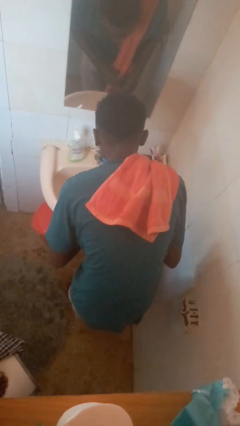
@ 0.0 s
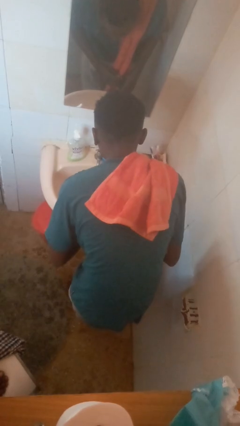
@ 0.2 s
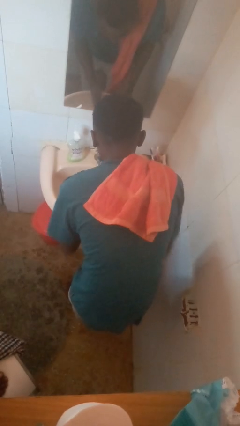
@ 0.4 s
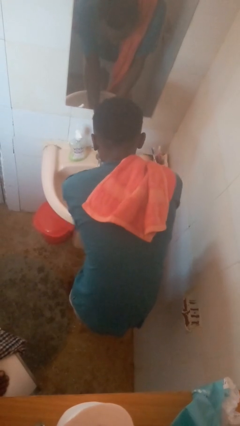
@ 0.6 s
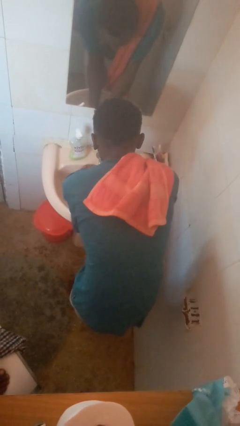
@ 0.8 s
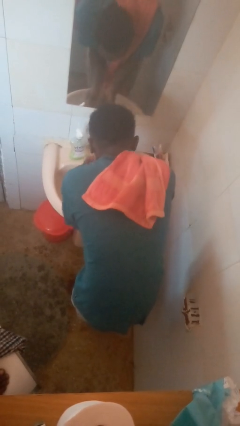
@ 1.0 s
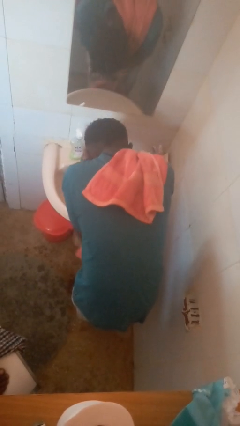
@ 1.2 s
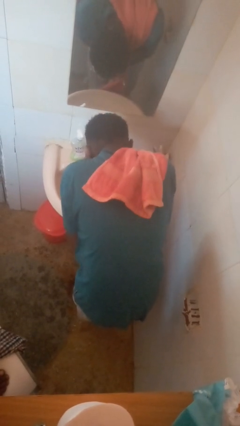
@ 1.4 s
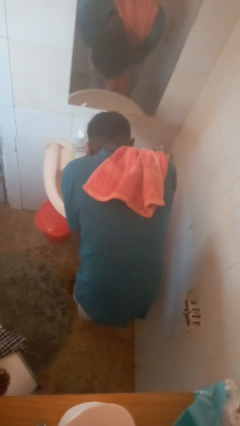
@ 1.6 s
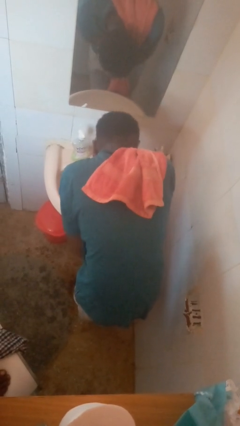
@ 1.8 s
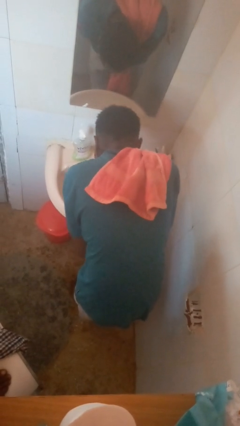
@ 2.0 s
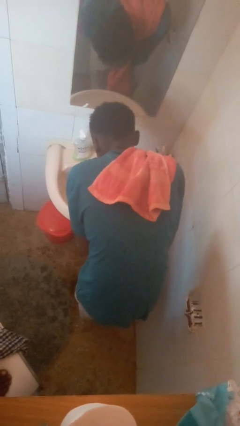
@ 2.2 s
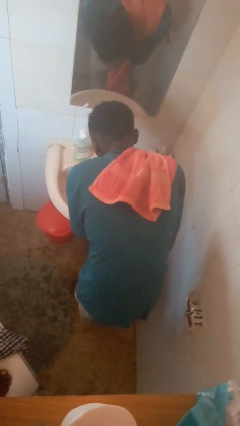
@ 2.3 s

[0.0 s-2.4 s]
person washes face

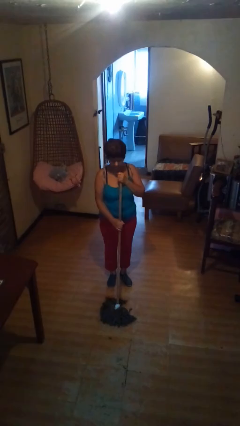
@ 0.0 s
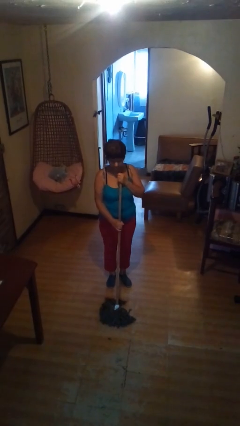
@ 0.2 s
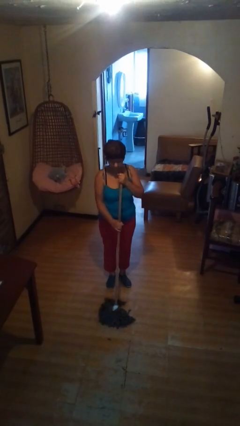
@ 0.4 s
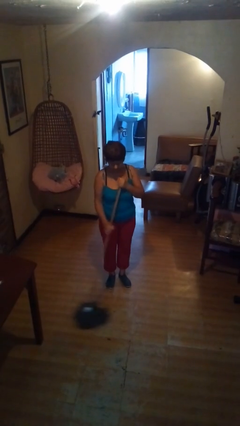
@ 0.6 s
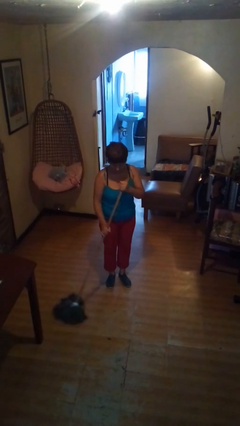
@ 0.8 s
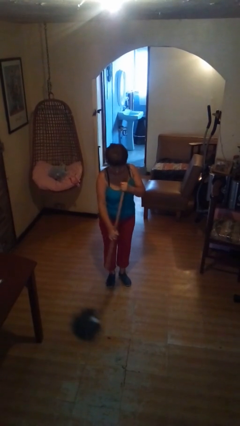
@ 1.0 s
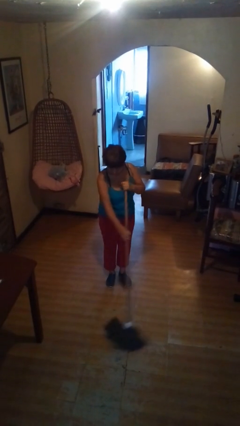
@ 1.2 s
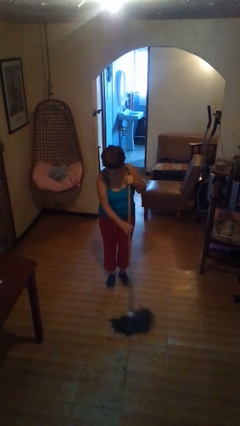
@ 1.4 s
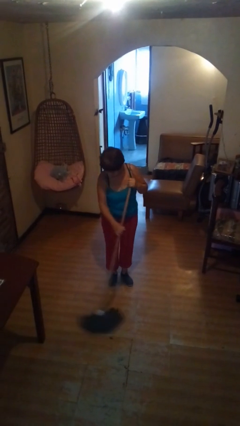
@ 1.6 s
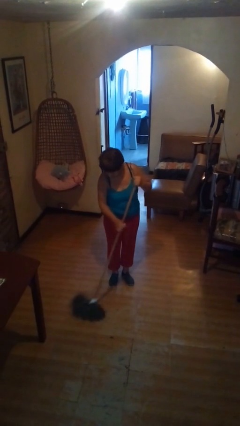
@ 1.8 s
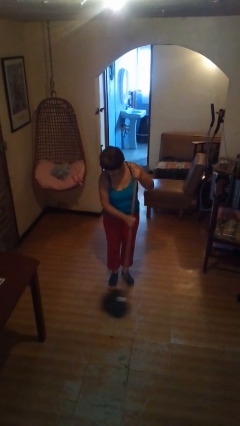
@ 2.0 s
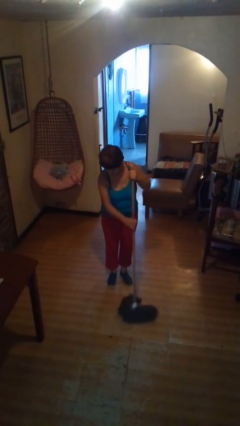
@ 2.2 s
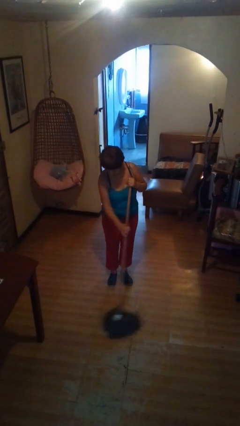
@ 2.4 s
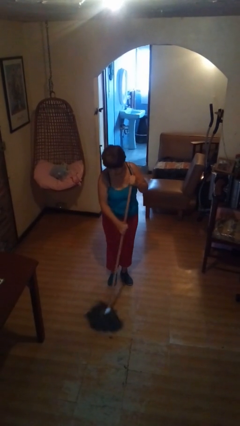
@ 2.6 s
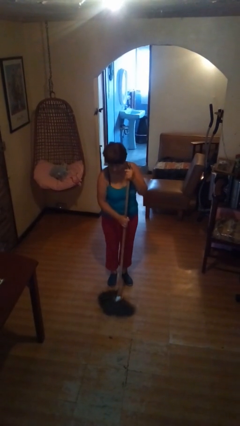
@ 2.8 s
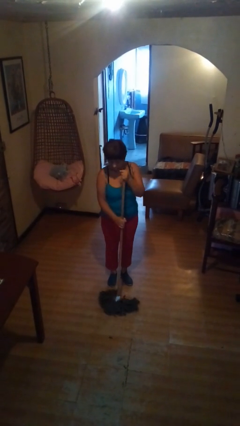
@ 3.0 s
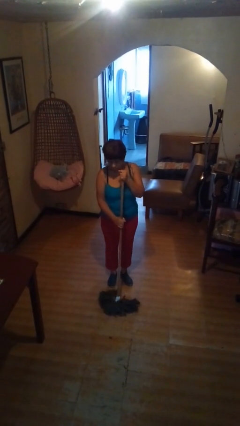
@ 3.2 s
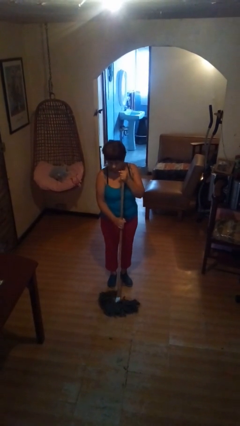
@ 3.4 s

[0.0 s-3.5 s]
person mops

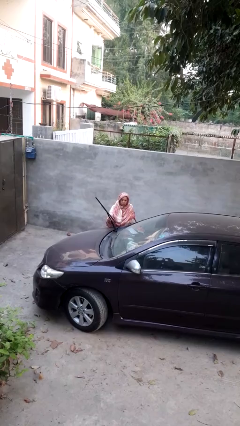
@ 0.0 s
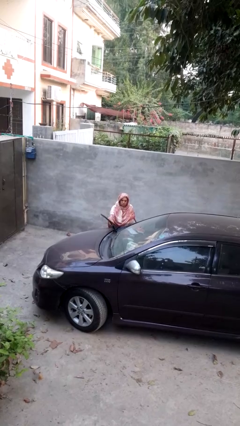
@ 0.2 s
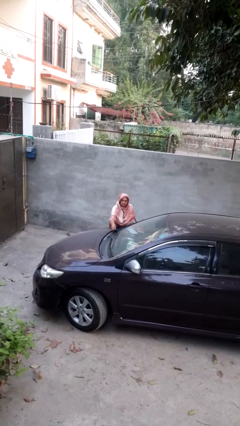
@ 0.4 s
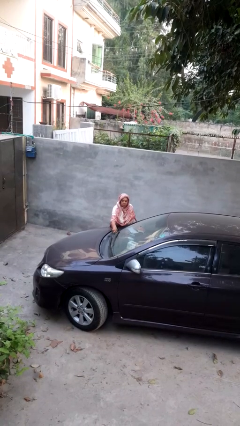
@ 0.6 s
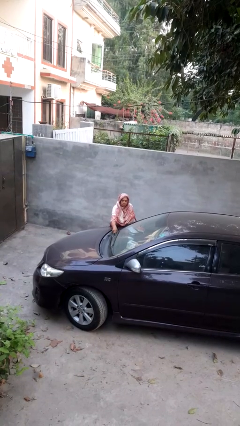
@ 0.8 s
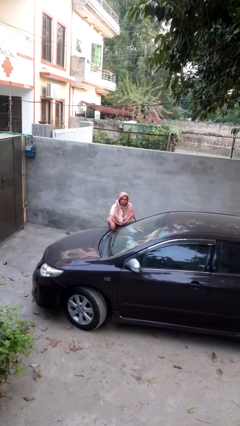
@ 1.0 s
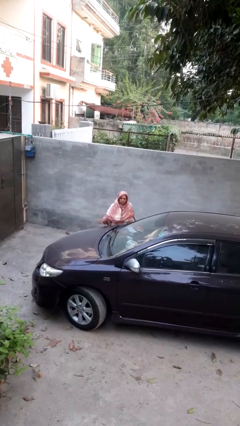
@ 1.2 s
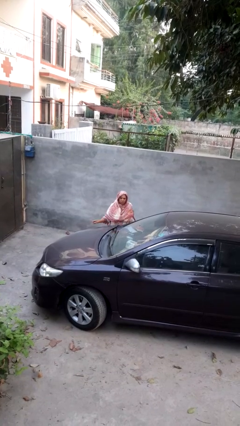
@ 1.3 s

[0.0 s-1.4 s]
person flips down car wipers

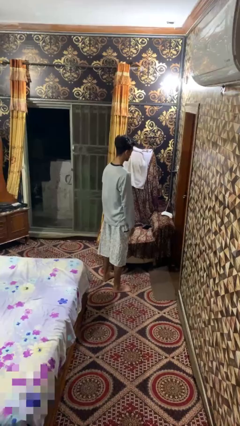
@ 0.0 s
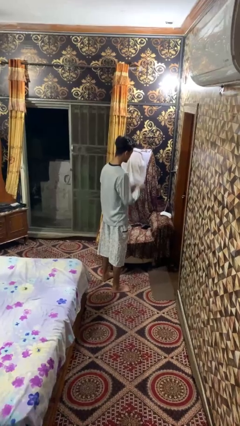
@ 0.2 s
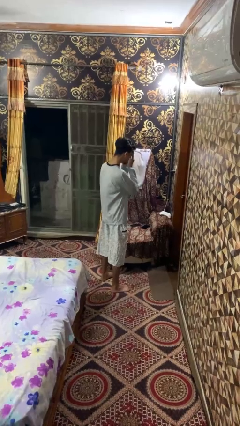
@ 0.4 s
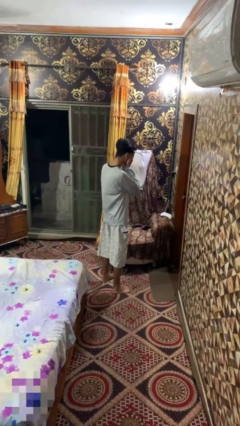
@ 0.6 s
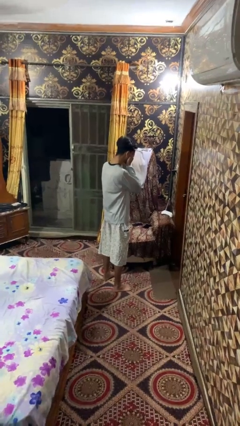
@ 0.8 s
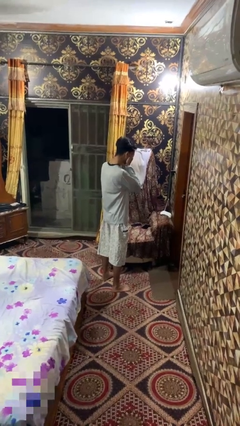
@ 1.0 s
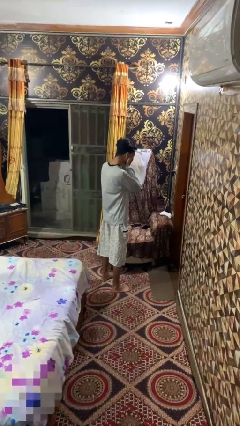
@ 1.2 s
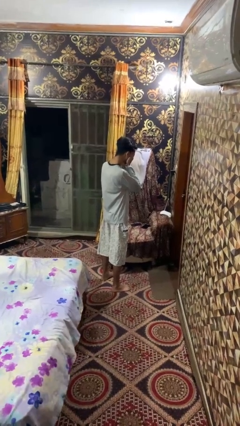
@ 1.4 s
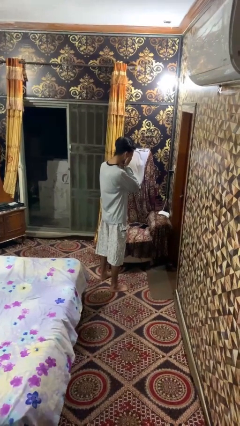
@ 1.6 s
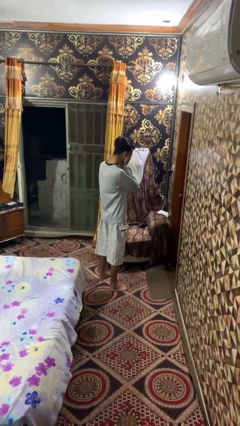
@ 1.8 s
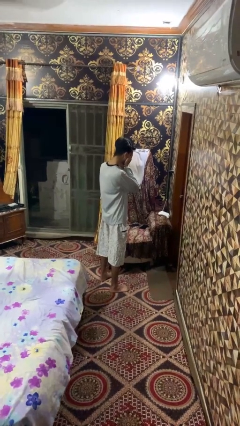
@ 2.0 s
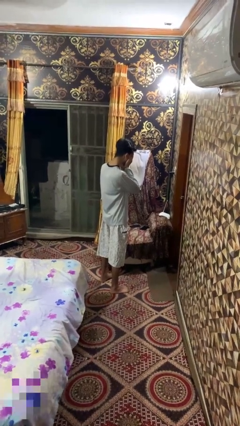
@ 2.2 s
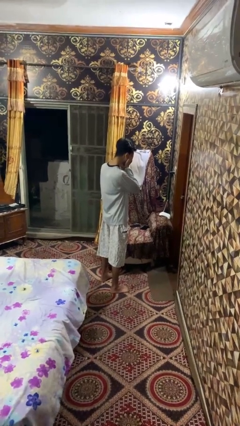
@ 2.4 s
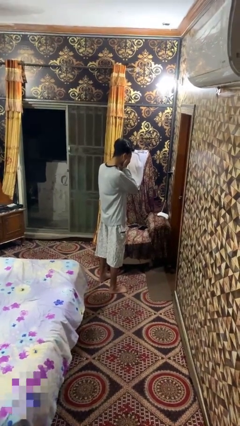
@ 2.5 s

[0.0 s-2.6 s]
person covers face with hands

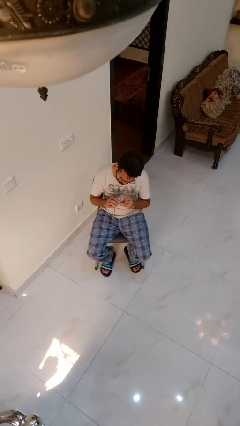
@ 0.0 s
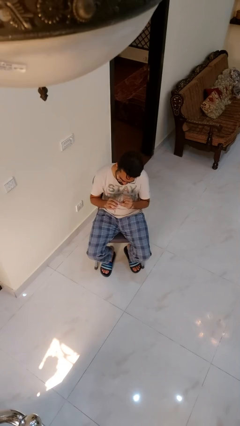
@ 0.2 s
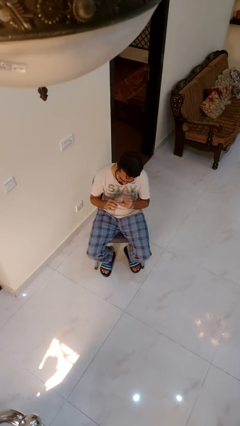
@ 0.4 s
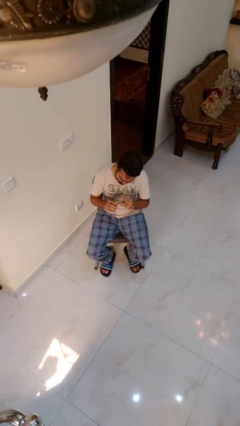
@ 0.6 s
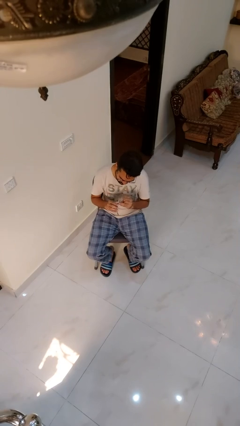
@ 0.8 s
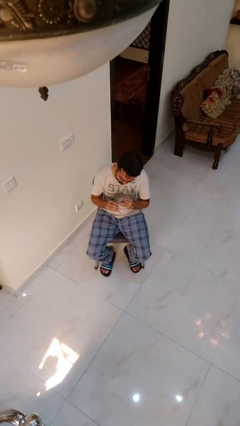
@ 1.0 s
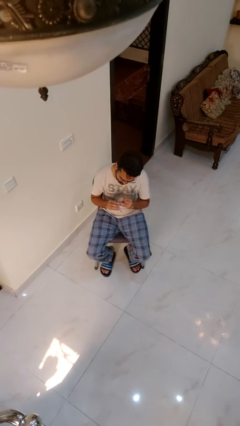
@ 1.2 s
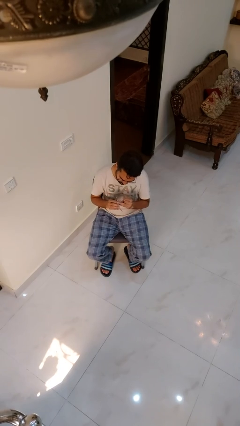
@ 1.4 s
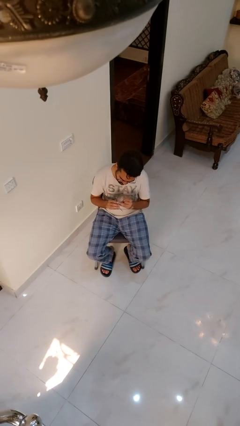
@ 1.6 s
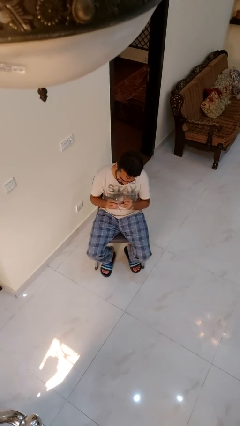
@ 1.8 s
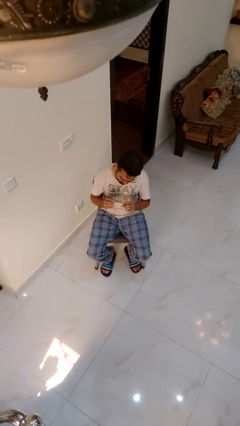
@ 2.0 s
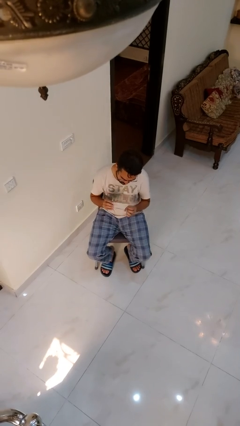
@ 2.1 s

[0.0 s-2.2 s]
person files fingernails

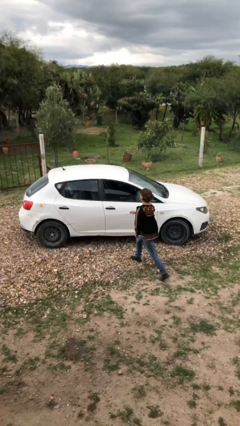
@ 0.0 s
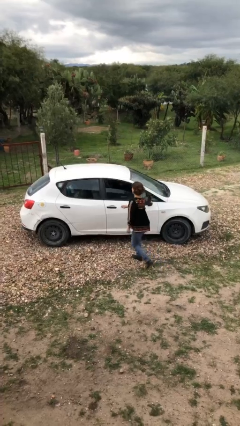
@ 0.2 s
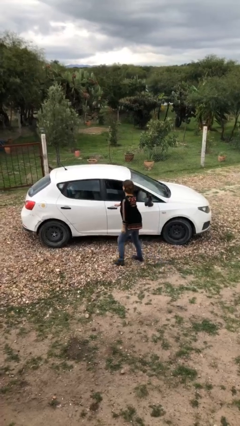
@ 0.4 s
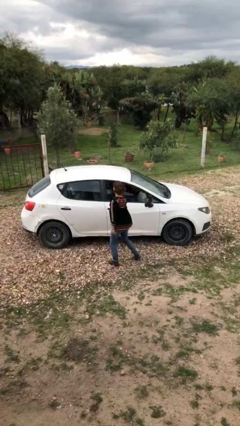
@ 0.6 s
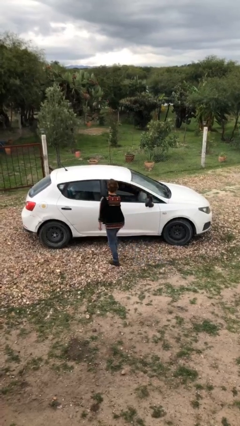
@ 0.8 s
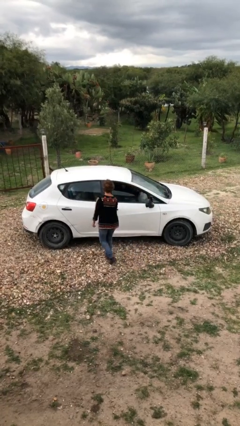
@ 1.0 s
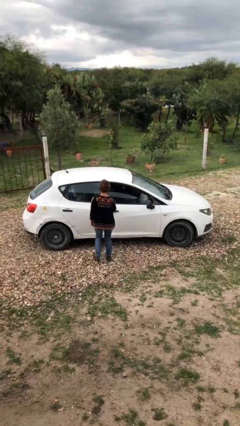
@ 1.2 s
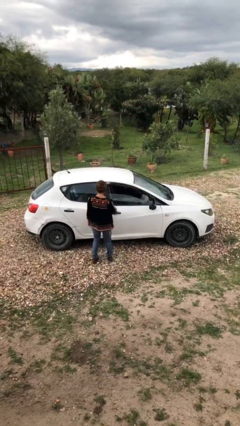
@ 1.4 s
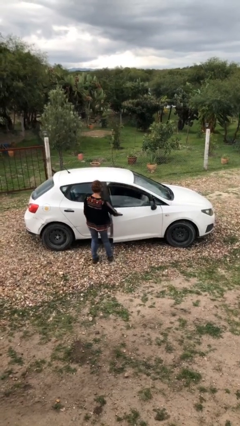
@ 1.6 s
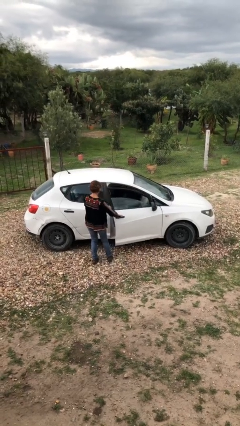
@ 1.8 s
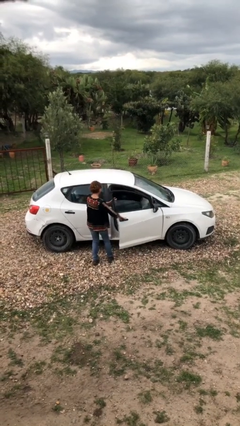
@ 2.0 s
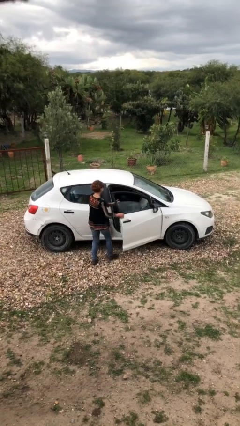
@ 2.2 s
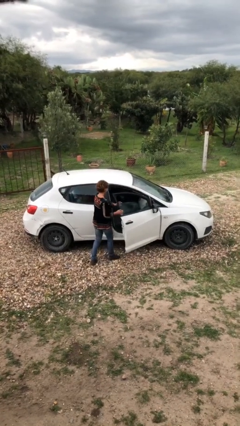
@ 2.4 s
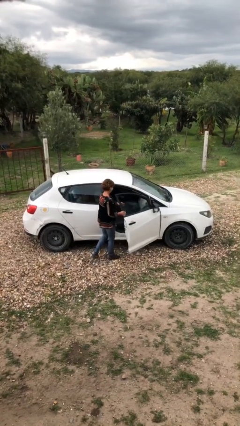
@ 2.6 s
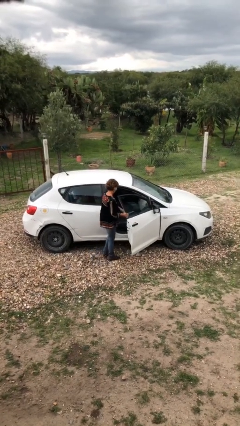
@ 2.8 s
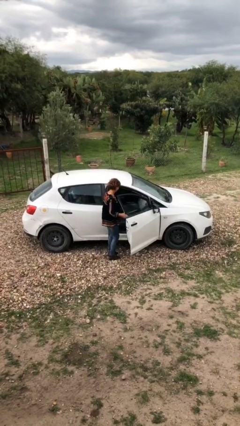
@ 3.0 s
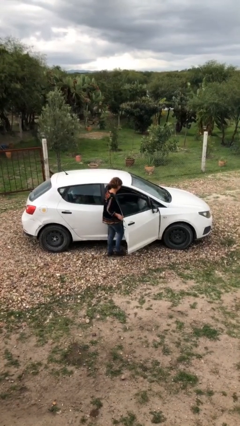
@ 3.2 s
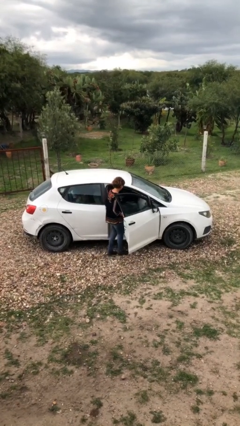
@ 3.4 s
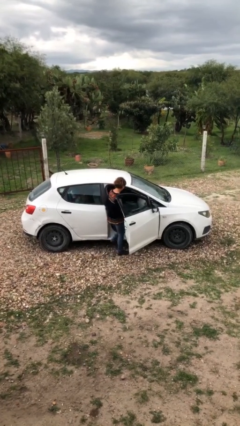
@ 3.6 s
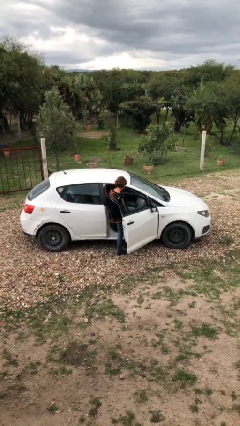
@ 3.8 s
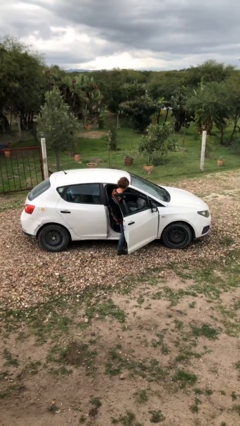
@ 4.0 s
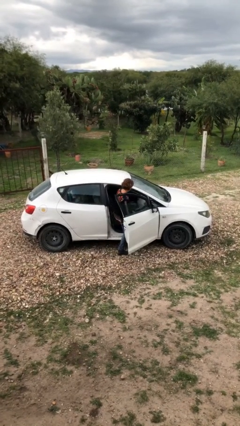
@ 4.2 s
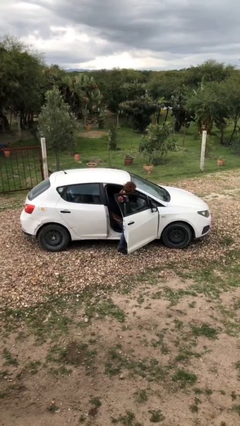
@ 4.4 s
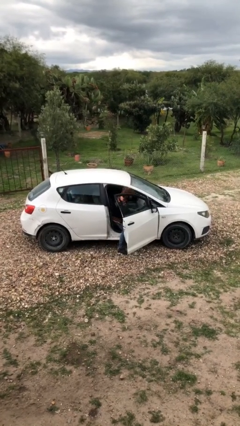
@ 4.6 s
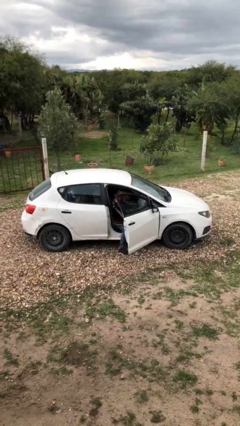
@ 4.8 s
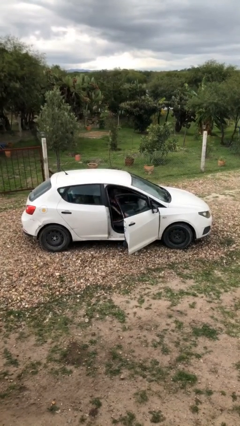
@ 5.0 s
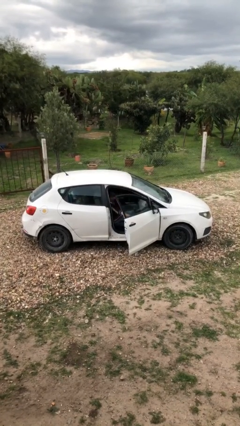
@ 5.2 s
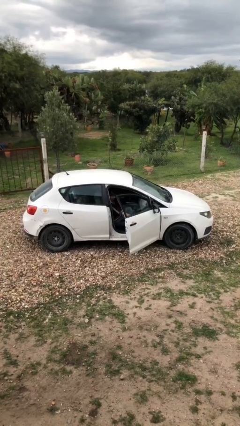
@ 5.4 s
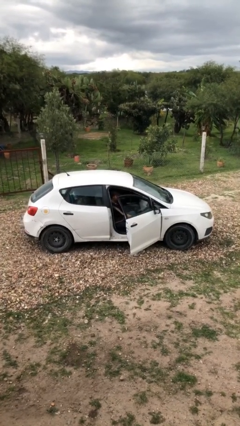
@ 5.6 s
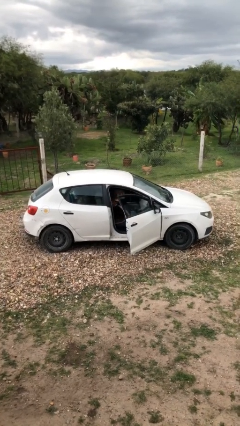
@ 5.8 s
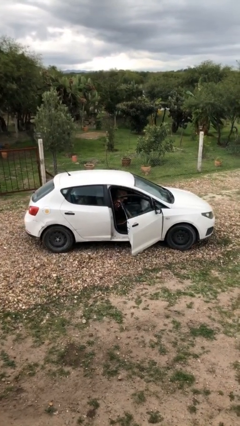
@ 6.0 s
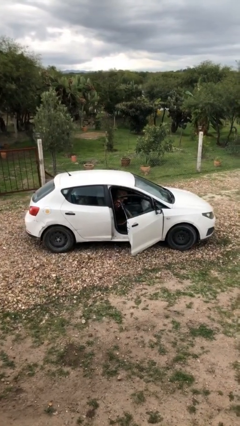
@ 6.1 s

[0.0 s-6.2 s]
car picks up person
